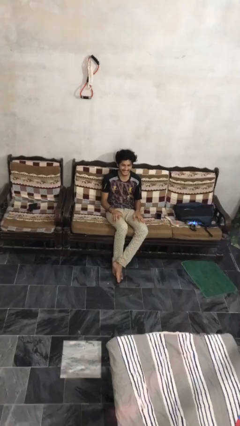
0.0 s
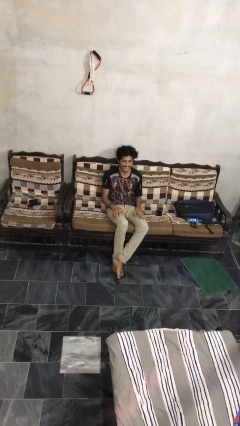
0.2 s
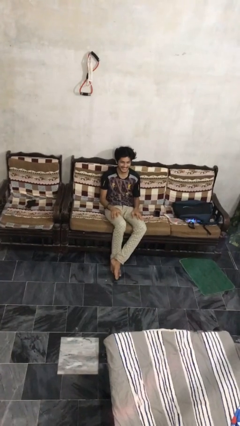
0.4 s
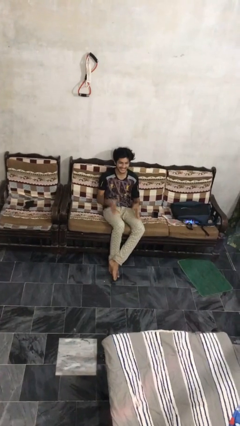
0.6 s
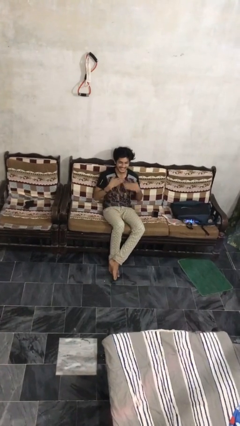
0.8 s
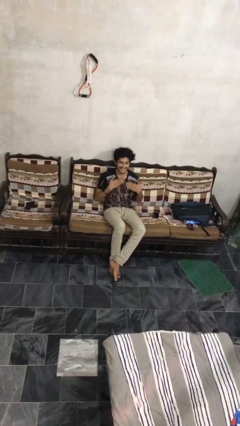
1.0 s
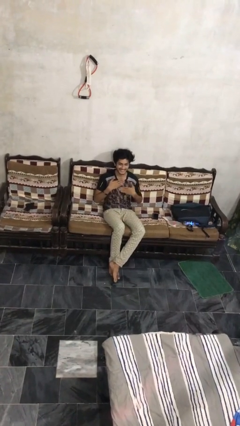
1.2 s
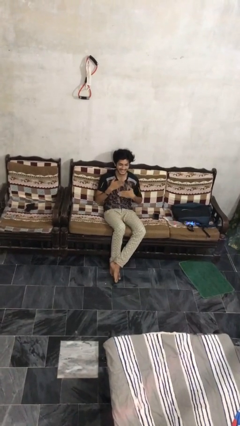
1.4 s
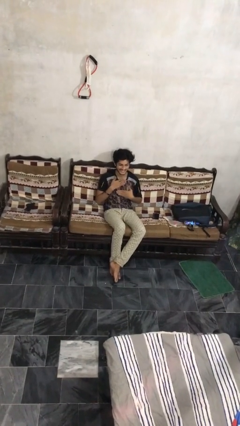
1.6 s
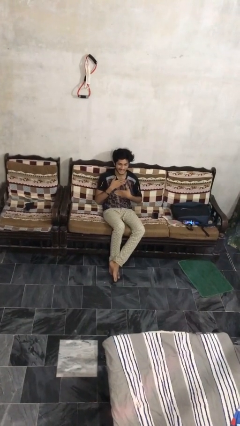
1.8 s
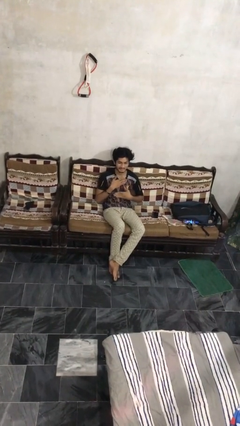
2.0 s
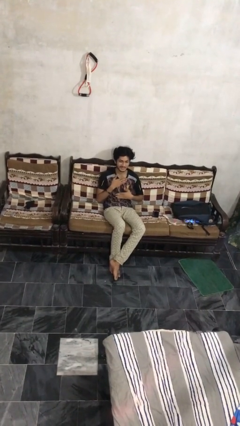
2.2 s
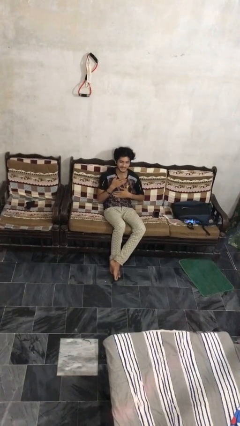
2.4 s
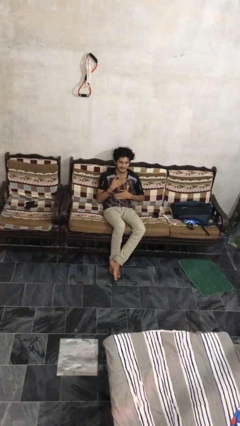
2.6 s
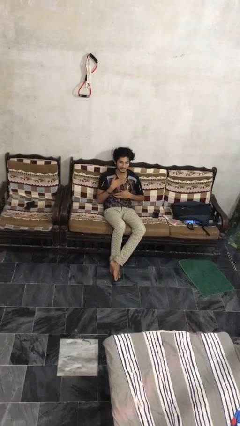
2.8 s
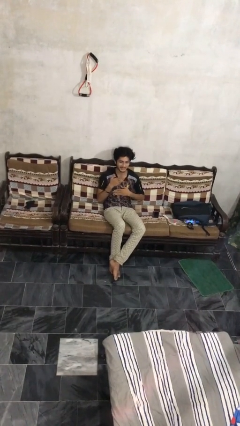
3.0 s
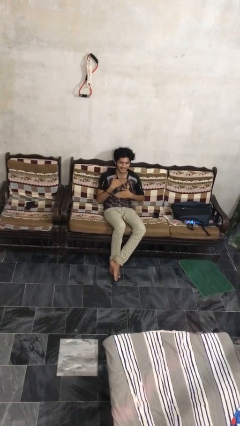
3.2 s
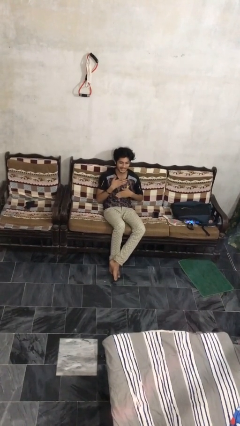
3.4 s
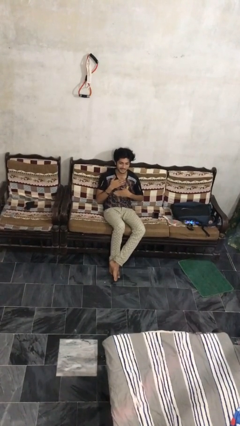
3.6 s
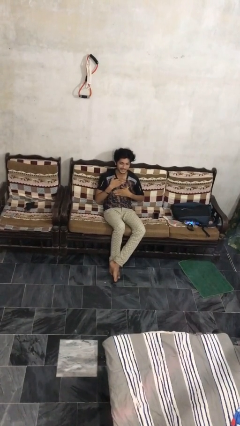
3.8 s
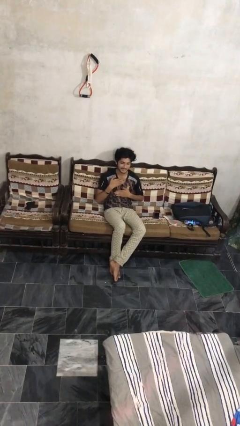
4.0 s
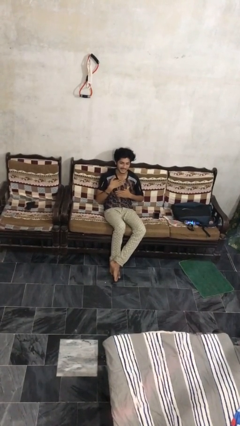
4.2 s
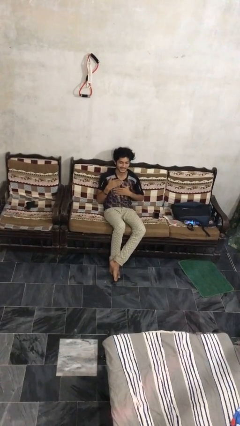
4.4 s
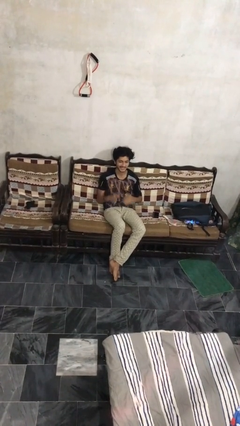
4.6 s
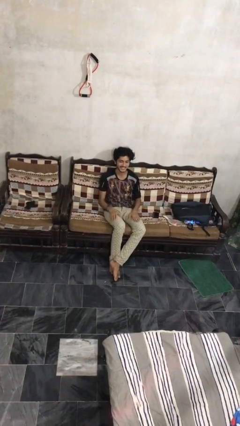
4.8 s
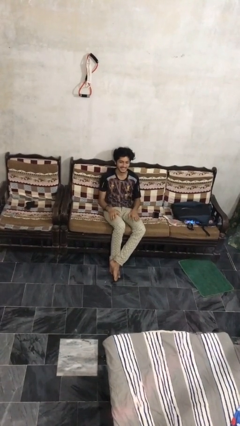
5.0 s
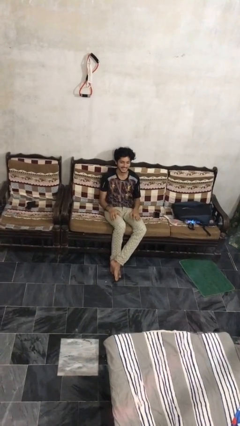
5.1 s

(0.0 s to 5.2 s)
person drums on chest

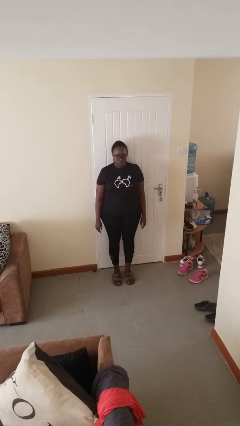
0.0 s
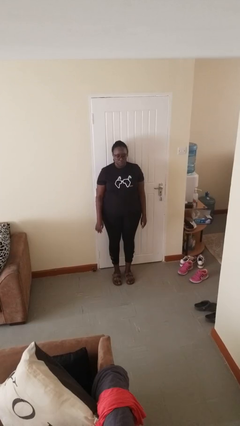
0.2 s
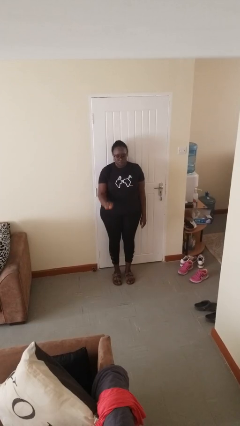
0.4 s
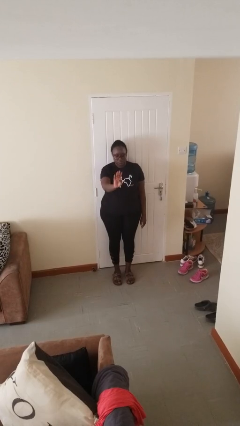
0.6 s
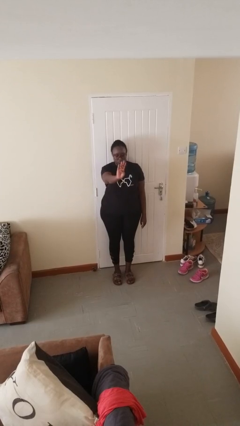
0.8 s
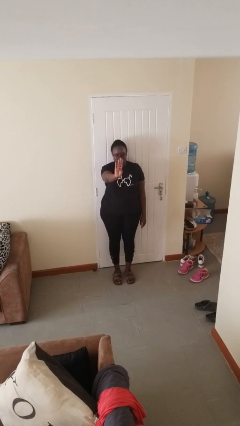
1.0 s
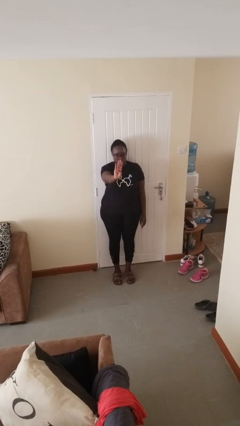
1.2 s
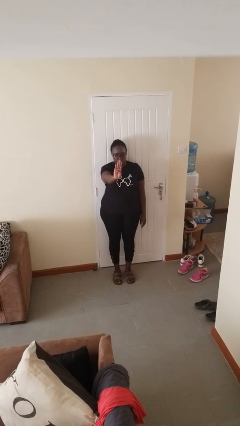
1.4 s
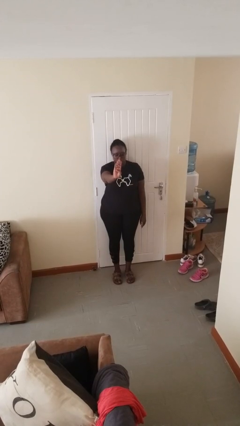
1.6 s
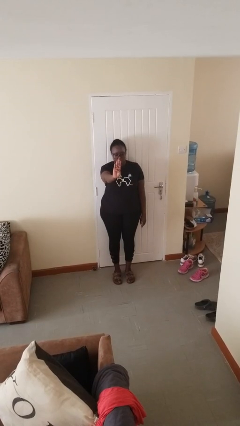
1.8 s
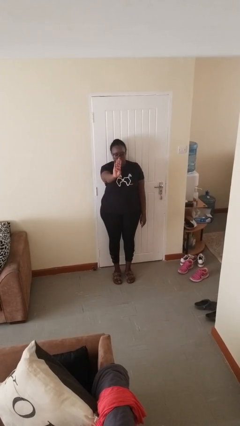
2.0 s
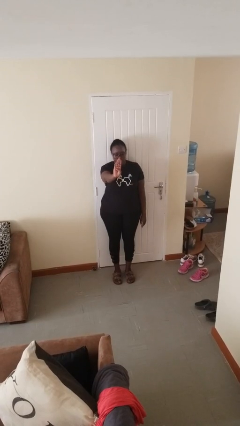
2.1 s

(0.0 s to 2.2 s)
person gestures number four

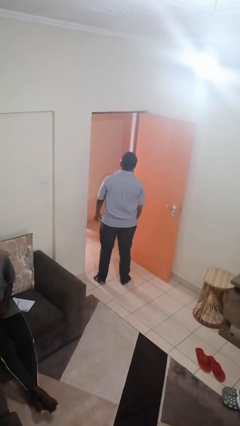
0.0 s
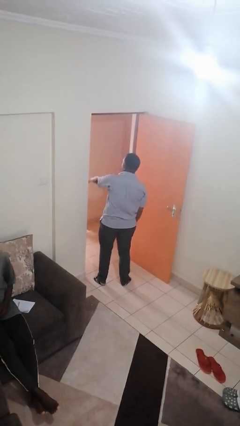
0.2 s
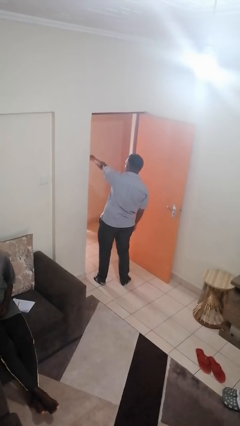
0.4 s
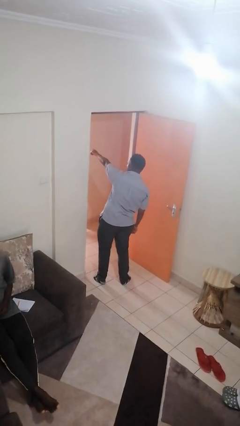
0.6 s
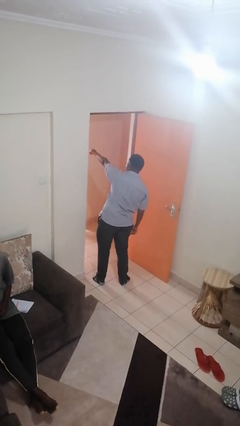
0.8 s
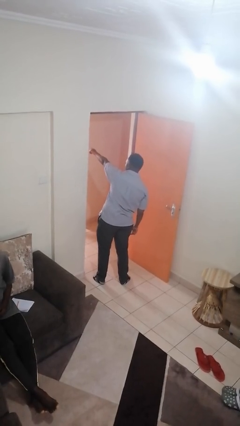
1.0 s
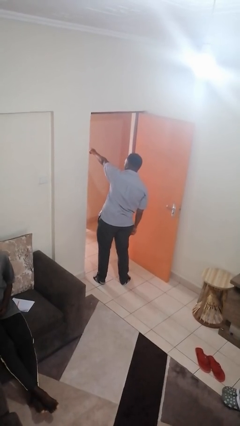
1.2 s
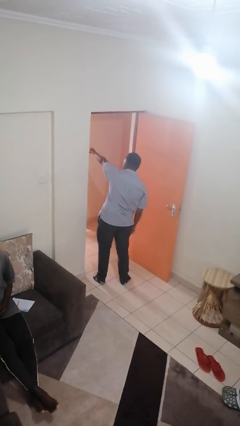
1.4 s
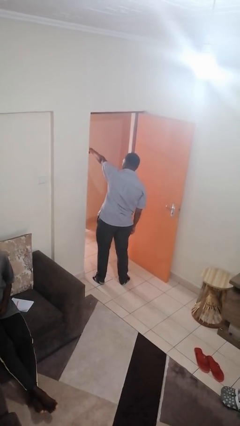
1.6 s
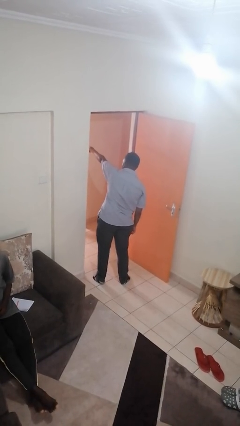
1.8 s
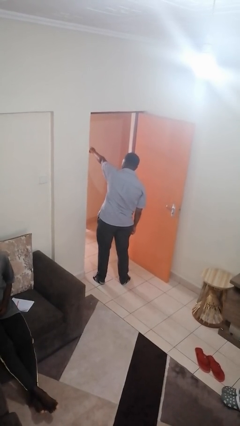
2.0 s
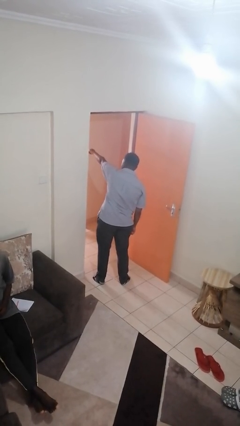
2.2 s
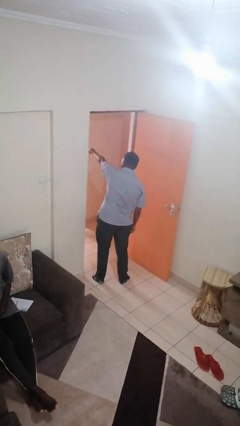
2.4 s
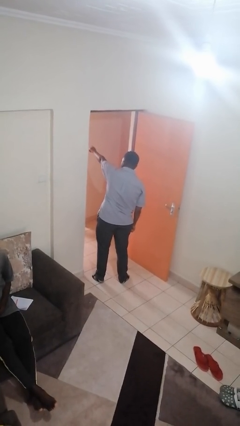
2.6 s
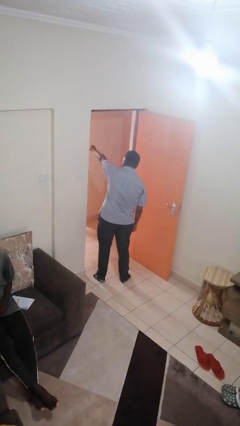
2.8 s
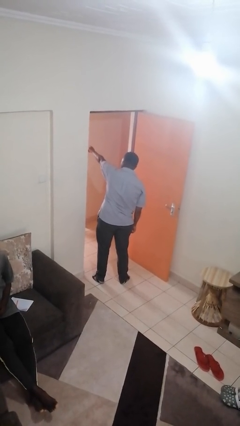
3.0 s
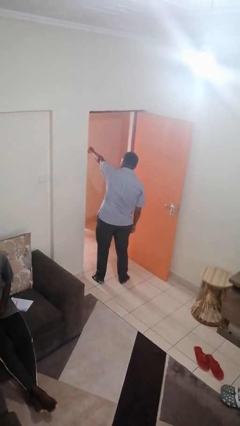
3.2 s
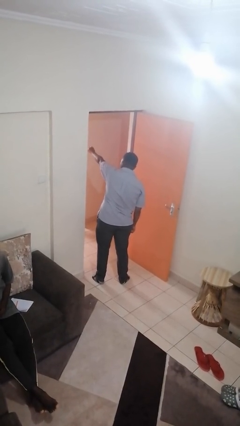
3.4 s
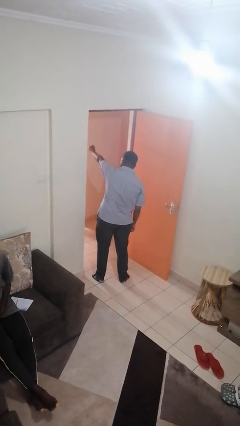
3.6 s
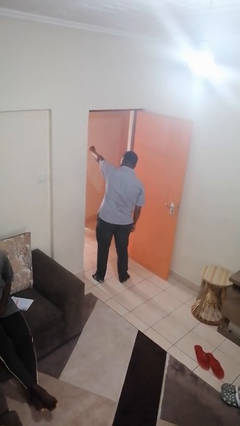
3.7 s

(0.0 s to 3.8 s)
person points at person

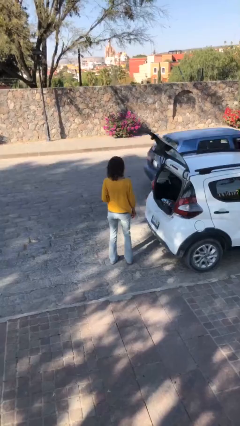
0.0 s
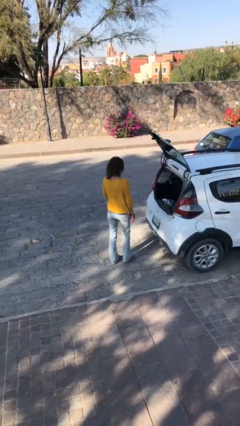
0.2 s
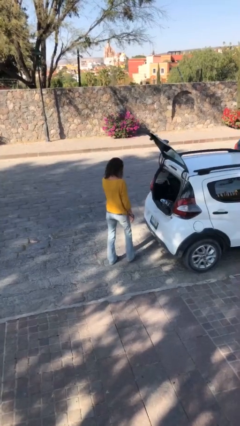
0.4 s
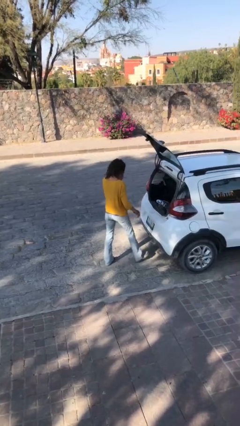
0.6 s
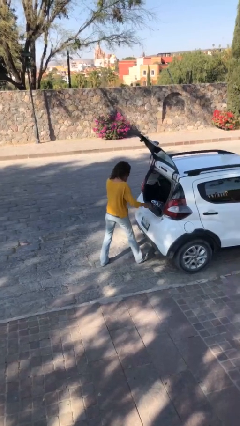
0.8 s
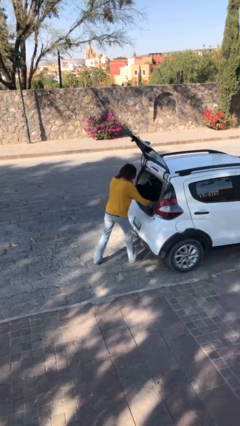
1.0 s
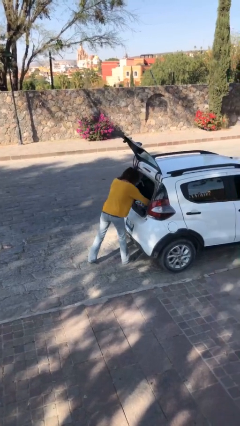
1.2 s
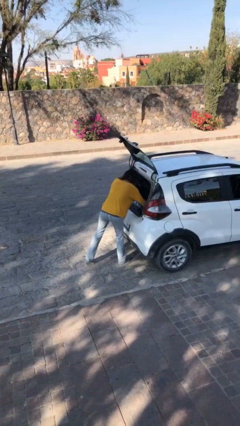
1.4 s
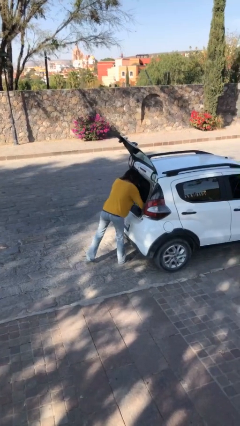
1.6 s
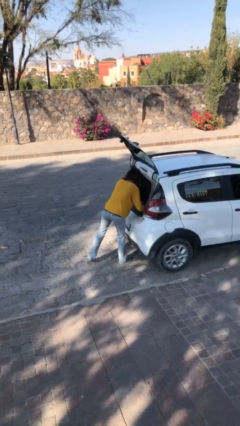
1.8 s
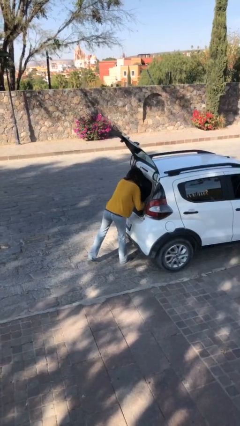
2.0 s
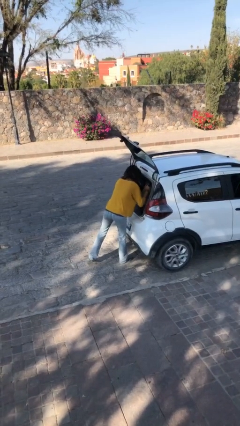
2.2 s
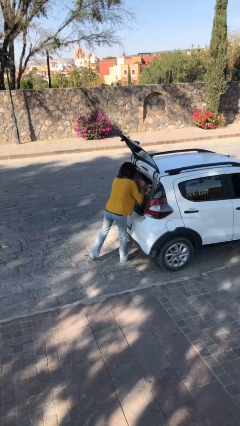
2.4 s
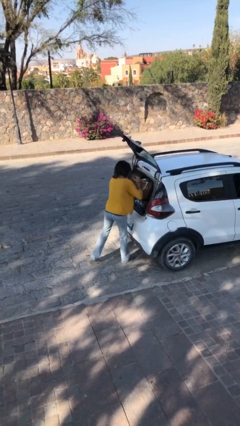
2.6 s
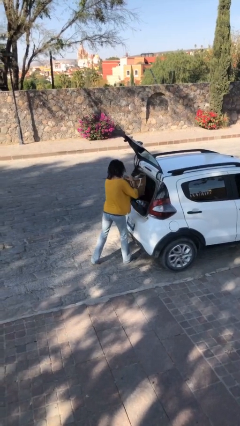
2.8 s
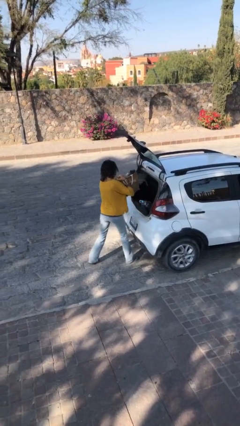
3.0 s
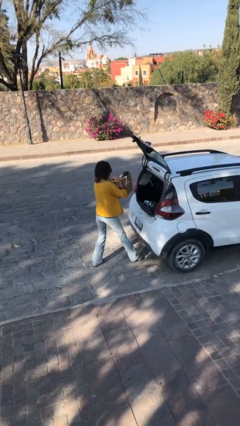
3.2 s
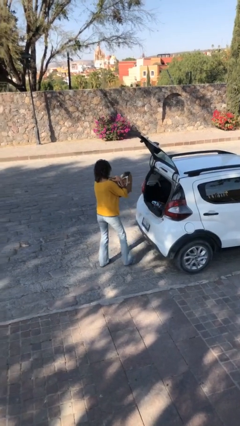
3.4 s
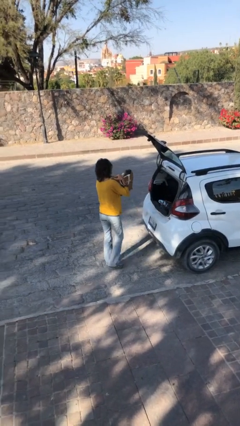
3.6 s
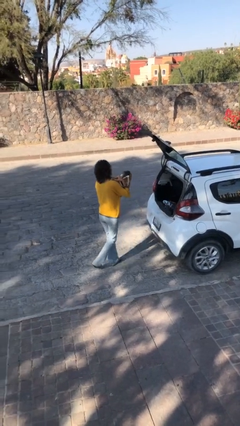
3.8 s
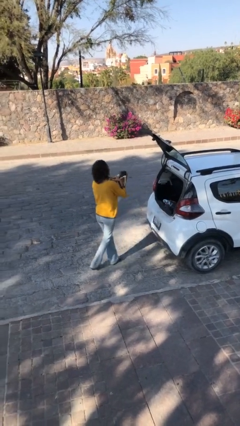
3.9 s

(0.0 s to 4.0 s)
person unloads car

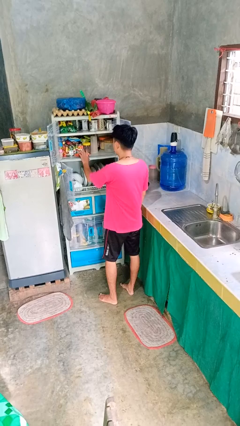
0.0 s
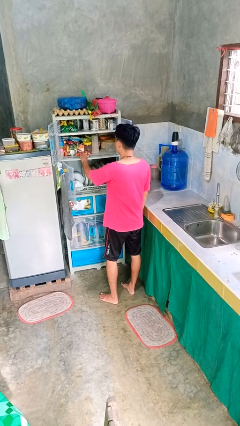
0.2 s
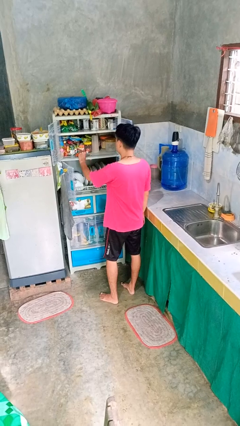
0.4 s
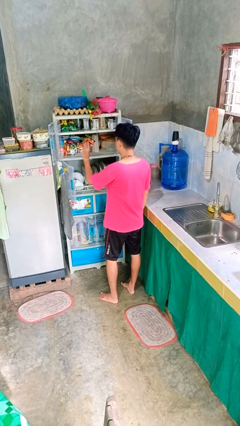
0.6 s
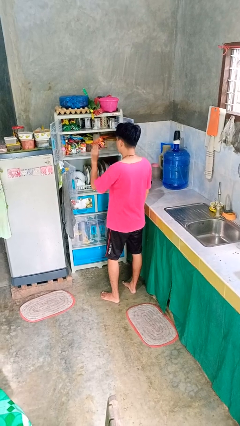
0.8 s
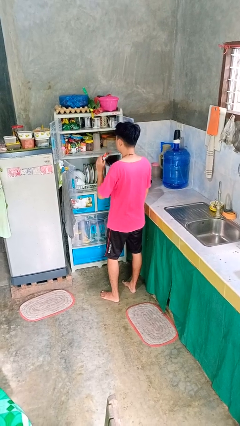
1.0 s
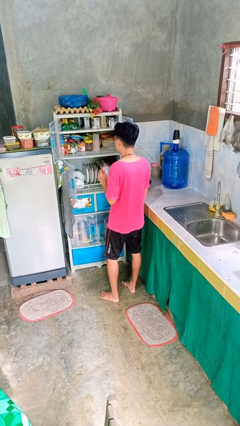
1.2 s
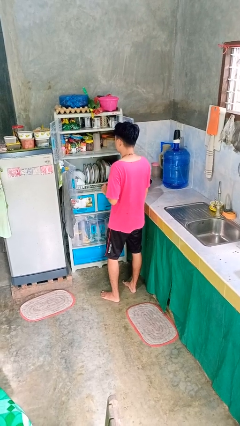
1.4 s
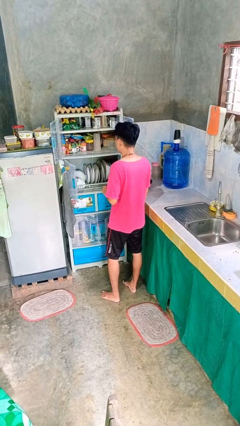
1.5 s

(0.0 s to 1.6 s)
person takes object from cabinet

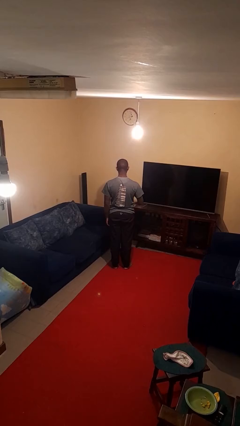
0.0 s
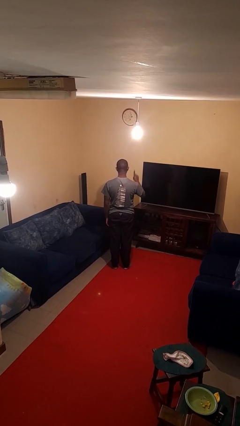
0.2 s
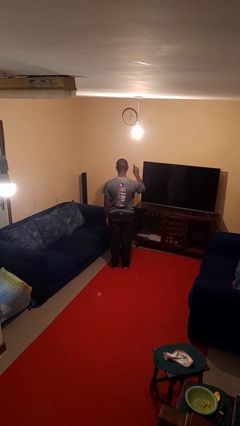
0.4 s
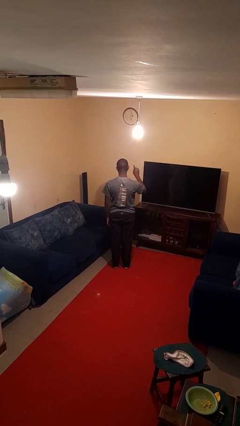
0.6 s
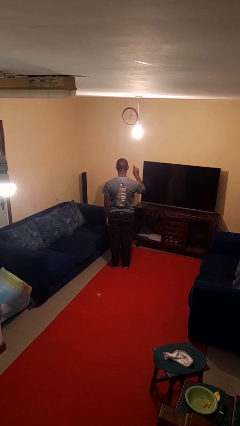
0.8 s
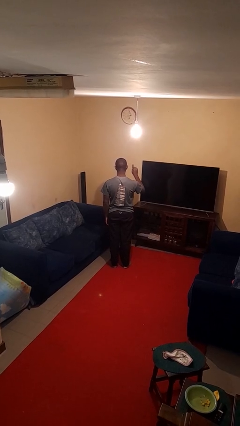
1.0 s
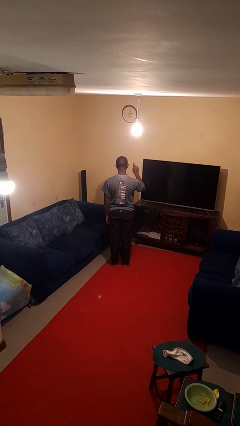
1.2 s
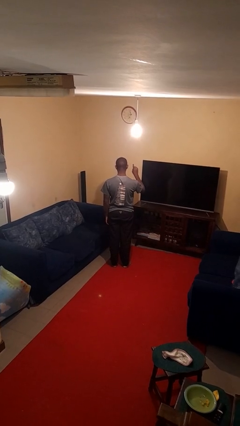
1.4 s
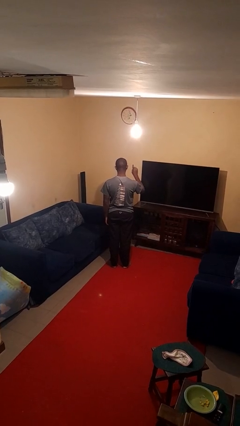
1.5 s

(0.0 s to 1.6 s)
person gestures number one
